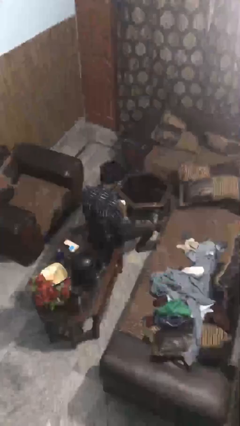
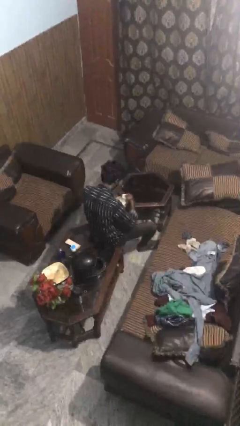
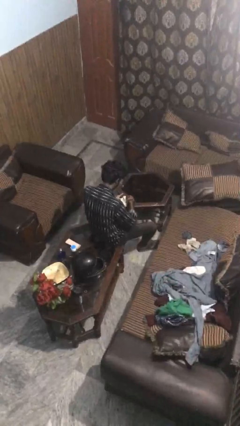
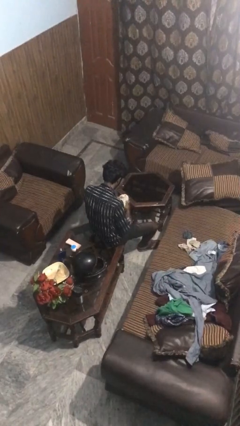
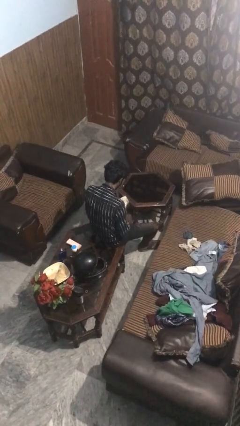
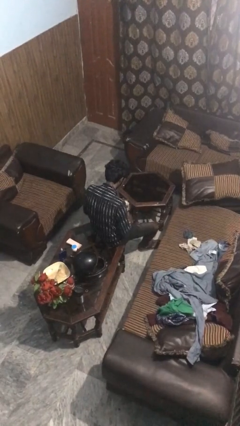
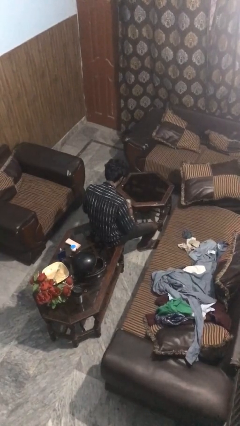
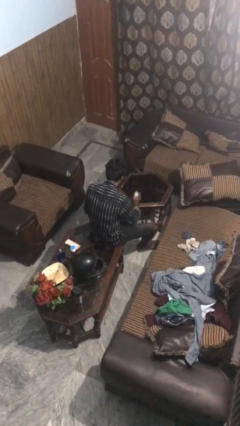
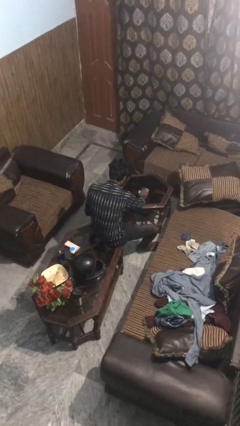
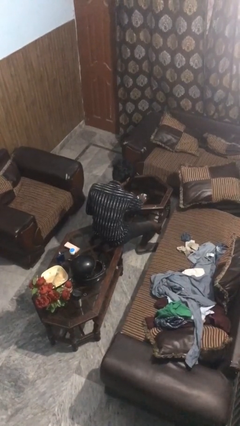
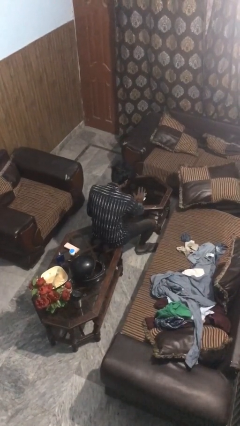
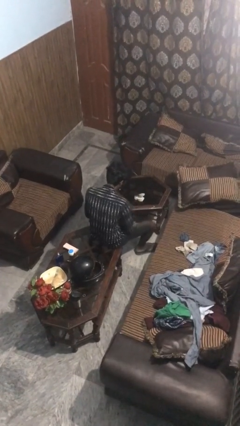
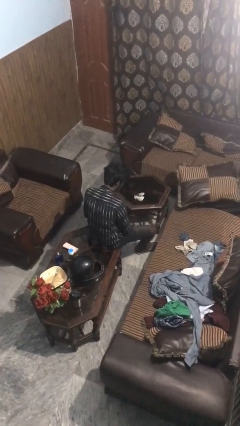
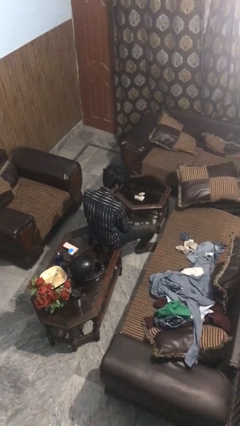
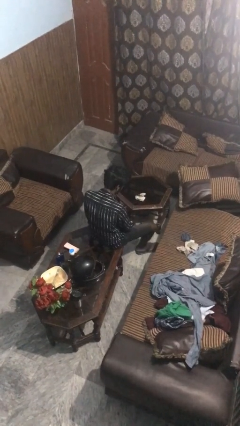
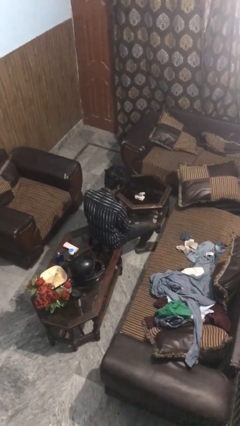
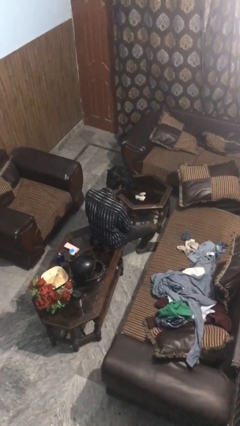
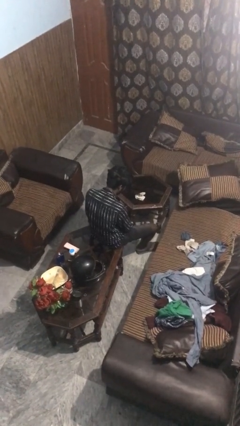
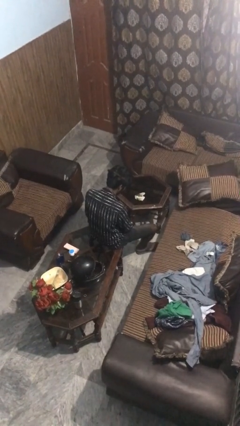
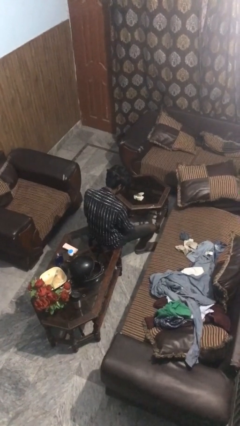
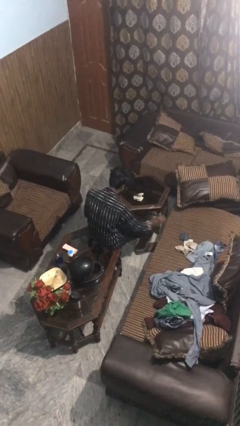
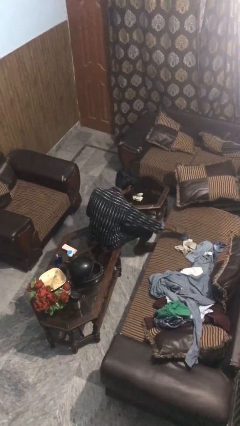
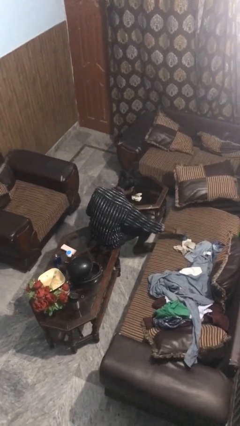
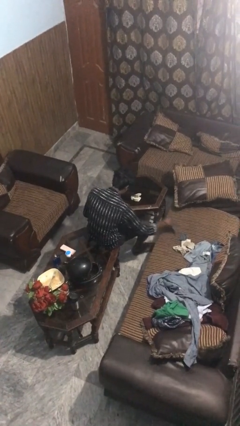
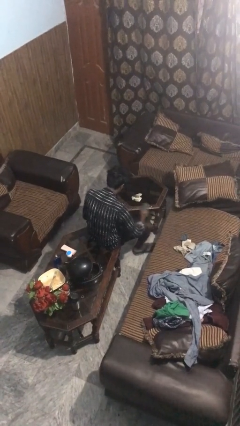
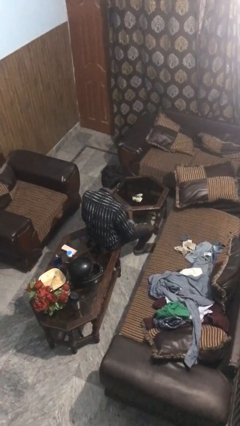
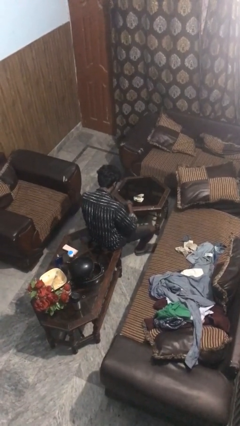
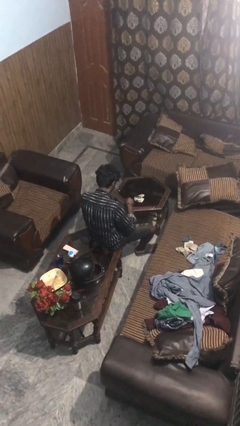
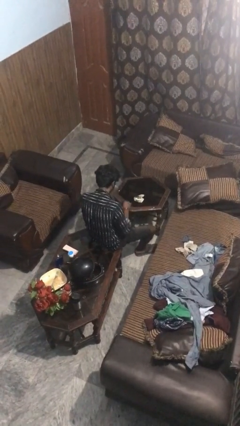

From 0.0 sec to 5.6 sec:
person folds socks

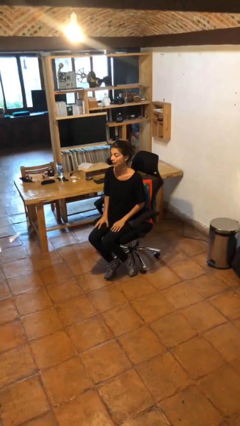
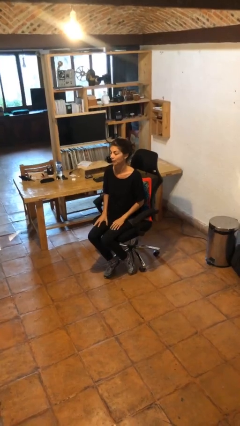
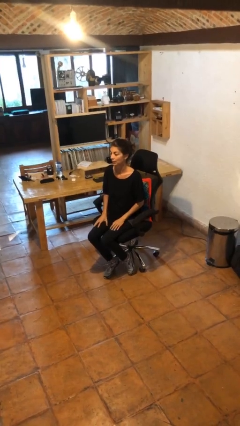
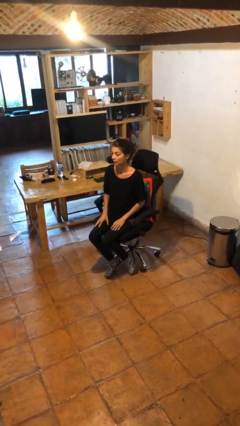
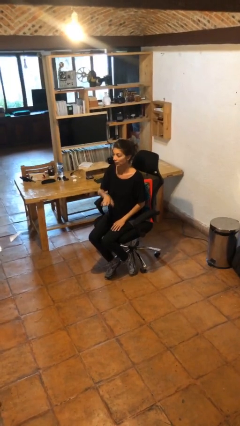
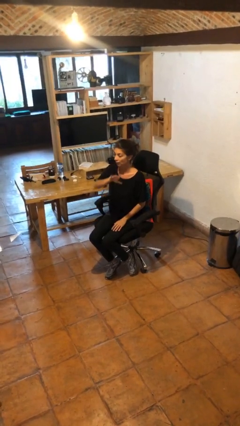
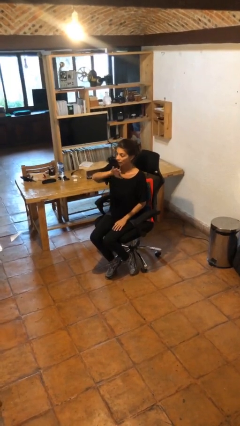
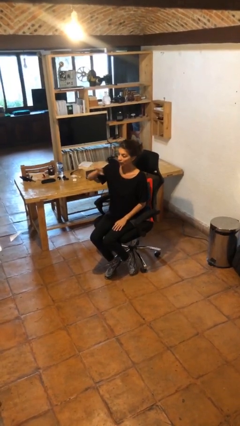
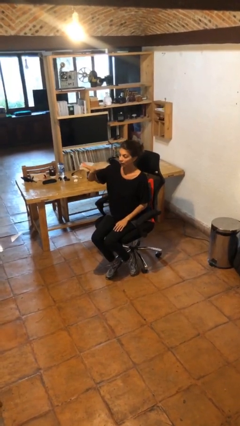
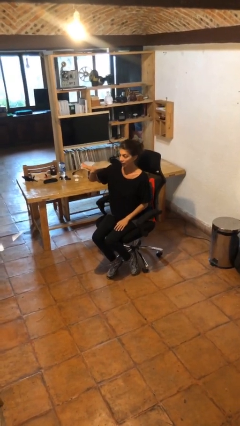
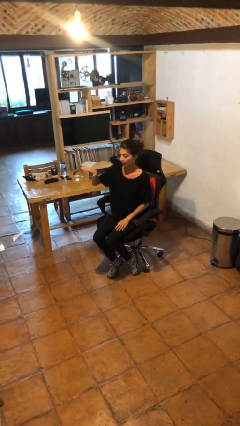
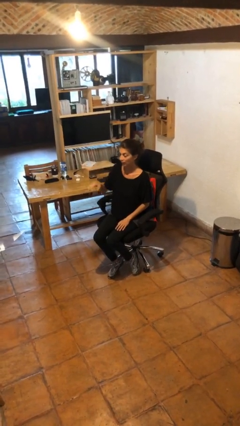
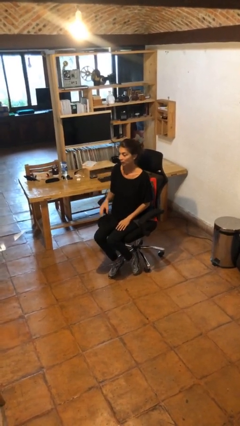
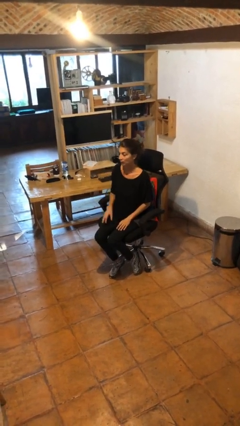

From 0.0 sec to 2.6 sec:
person gestures swipe right

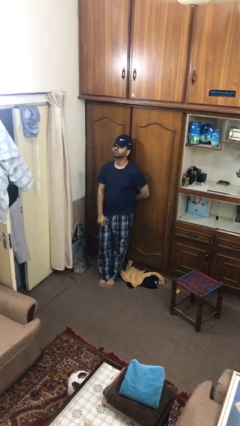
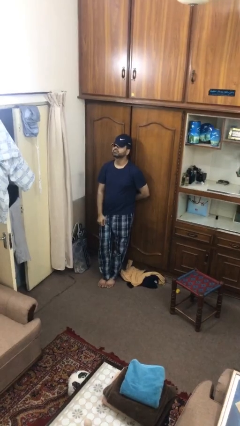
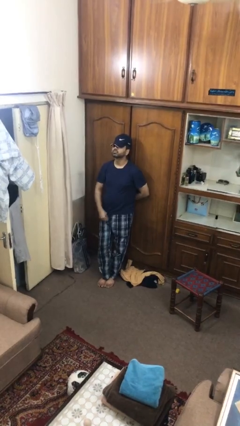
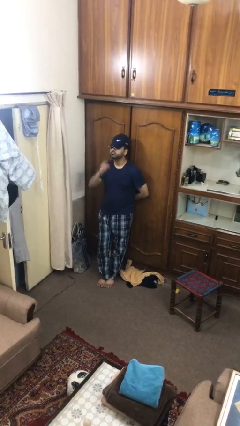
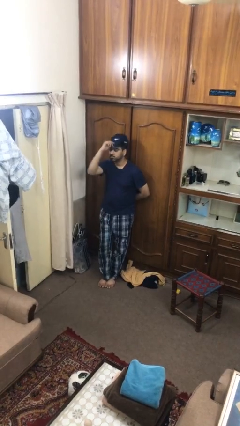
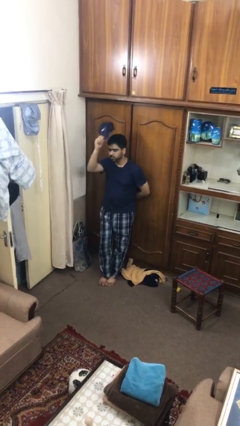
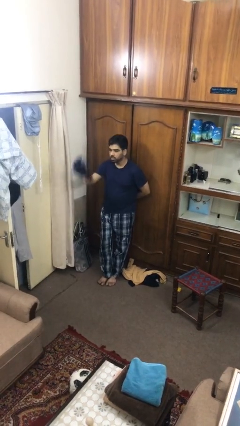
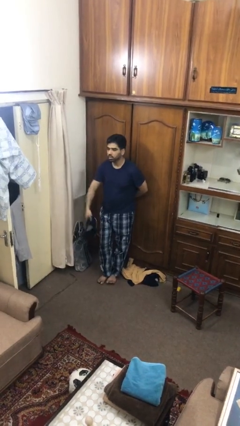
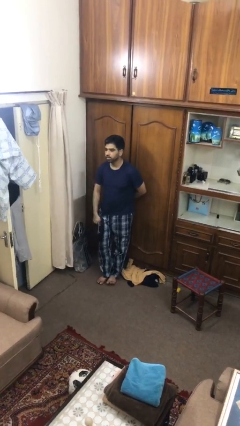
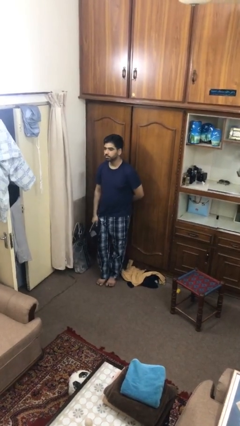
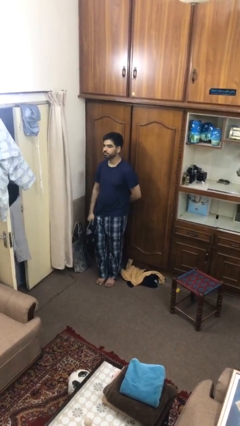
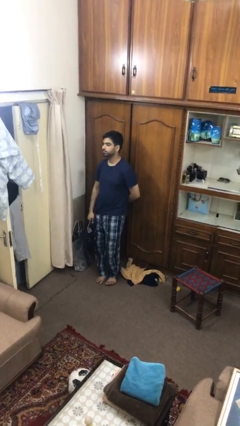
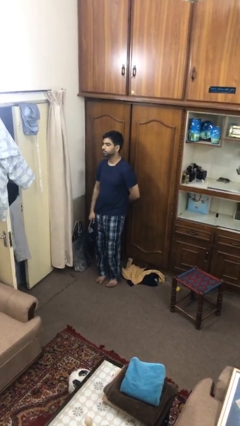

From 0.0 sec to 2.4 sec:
person takes off hat

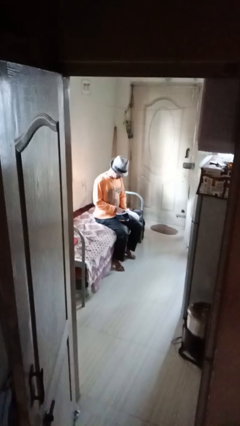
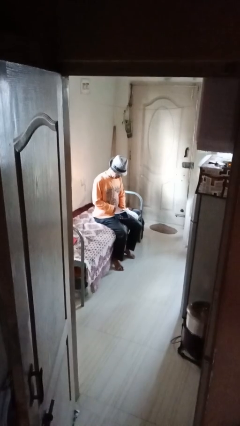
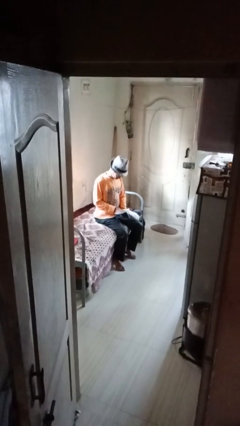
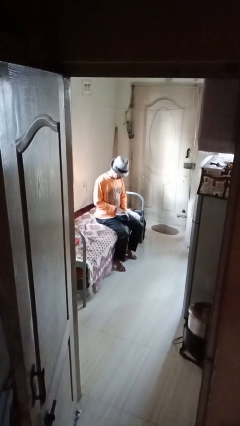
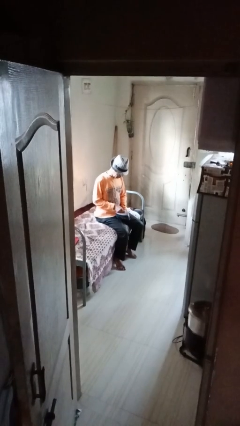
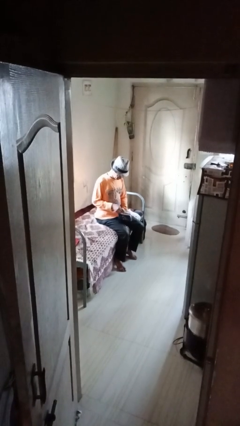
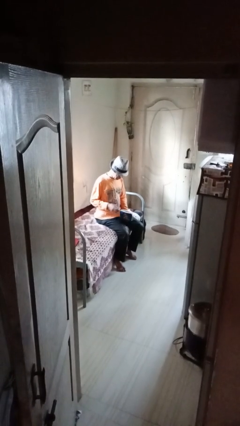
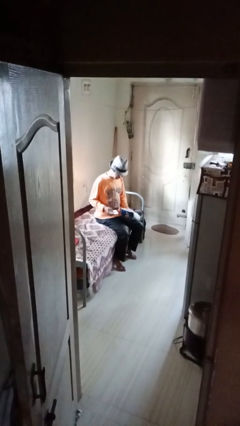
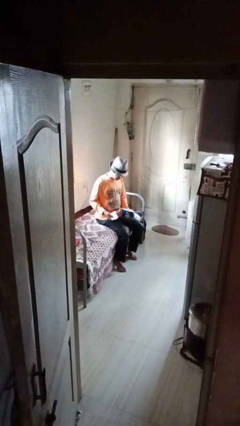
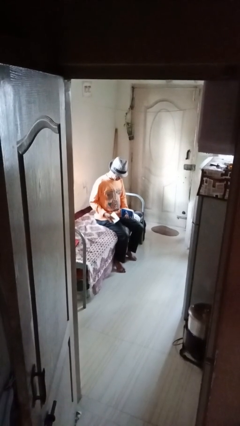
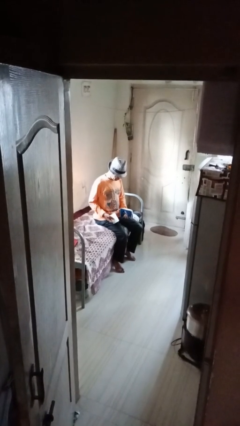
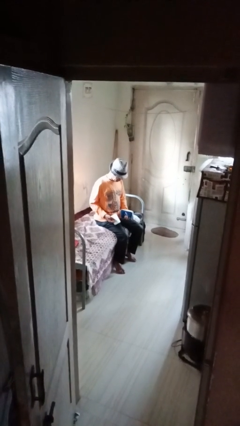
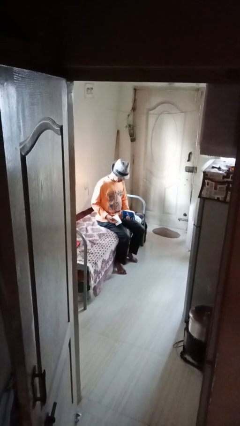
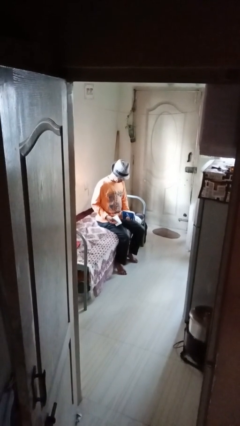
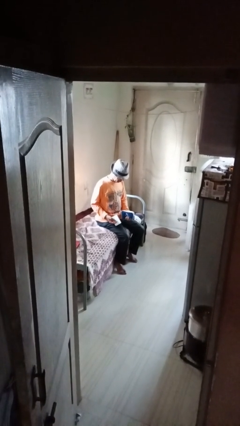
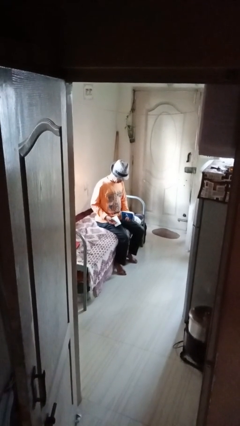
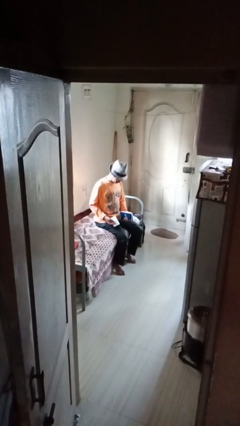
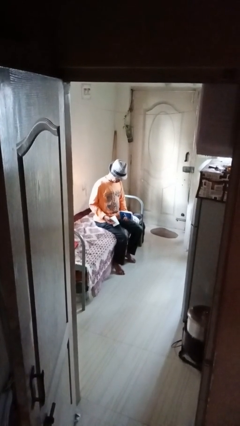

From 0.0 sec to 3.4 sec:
person takes object from purse

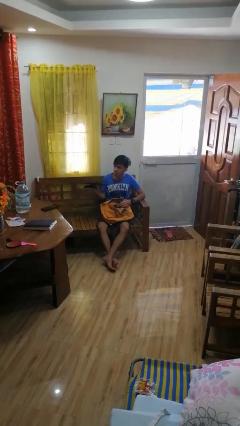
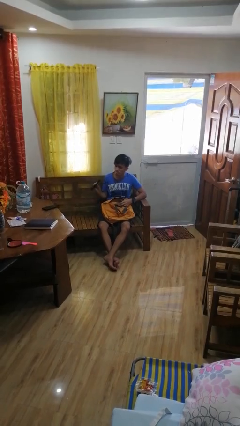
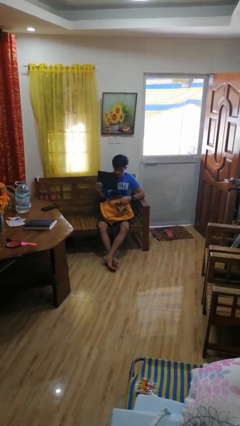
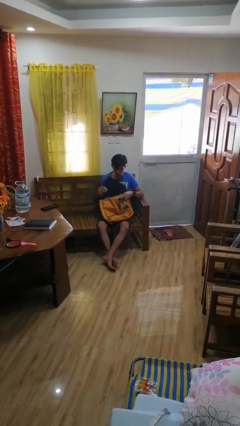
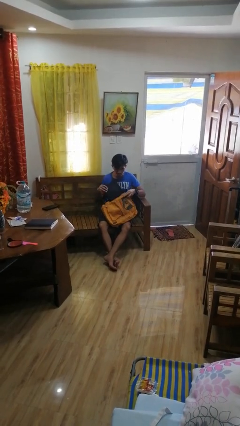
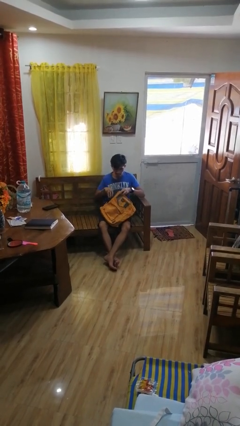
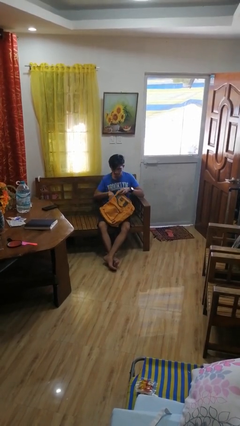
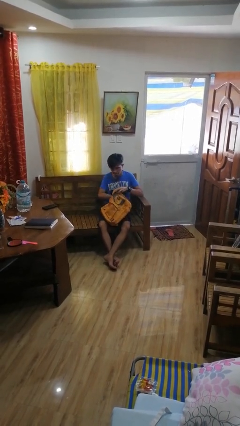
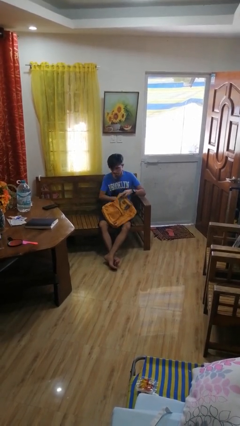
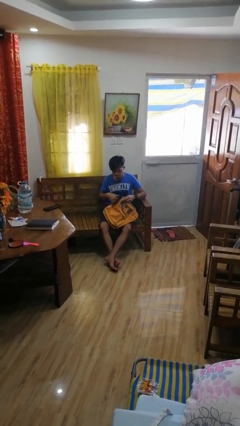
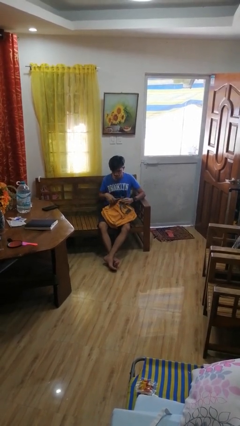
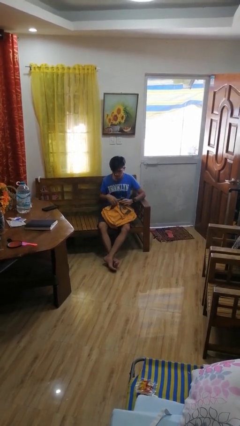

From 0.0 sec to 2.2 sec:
person puts object into backpack

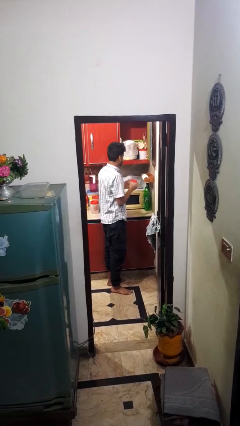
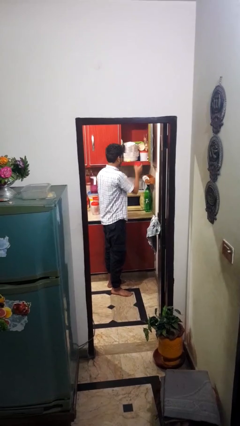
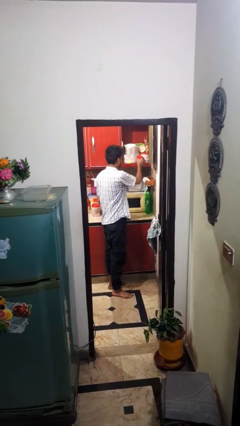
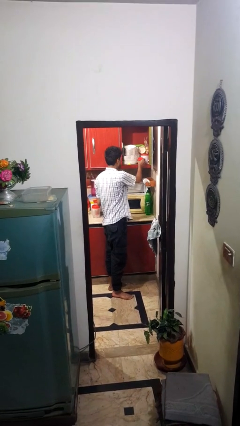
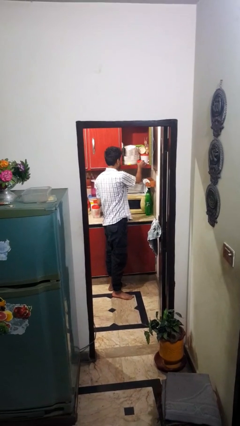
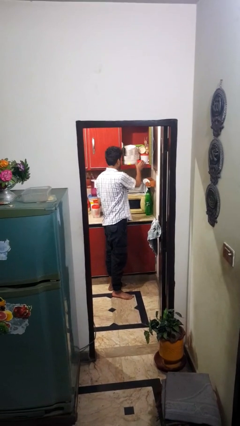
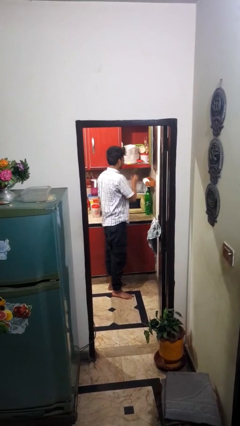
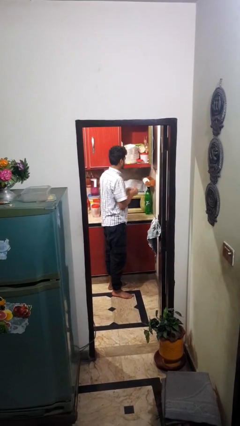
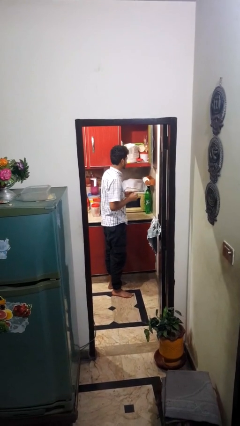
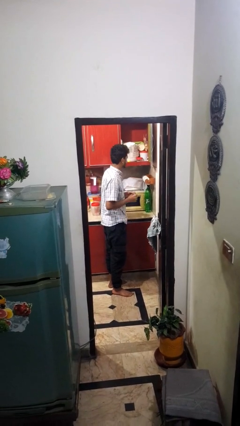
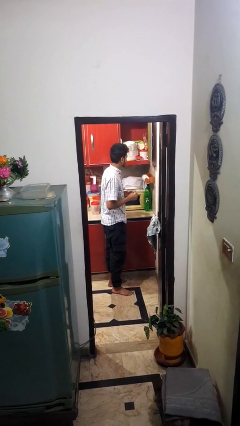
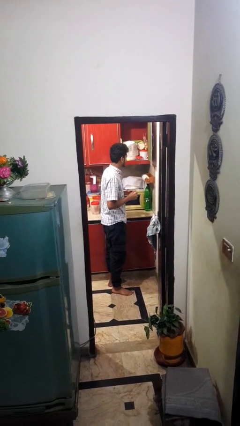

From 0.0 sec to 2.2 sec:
person puts down object into cabinet
